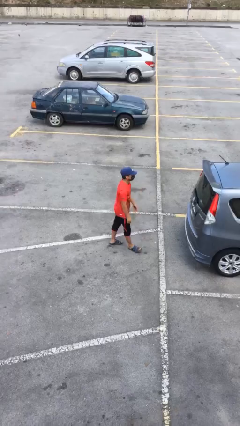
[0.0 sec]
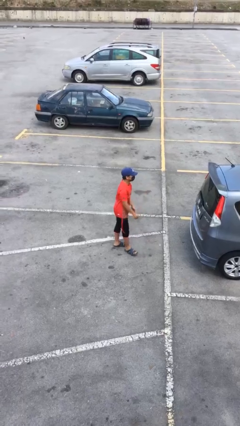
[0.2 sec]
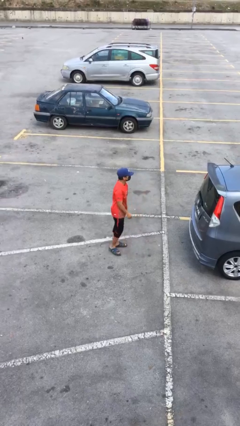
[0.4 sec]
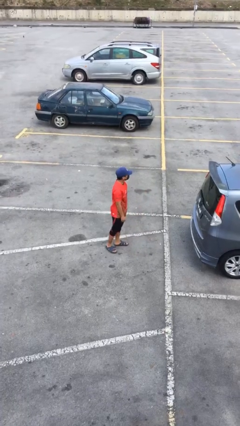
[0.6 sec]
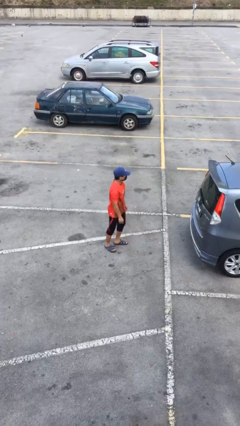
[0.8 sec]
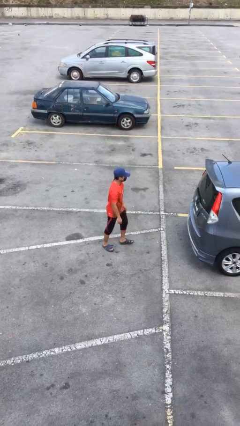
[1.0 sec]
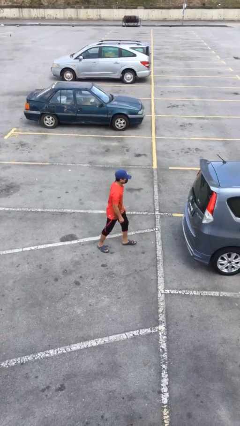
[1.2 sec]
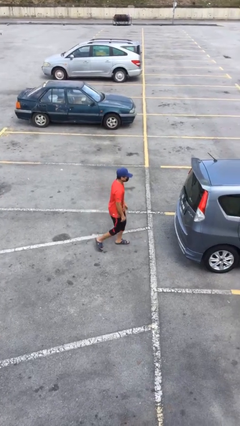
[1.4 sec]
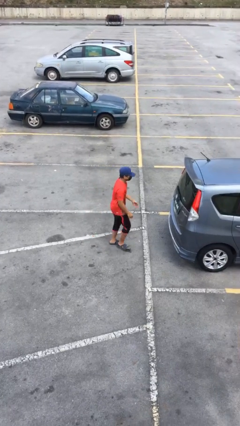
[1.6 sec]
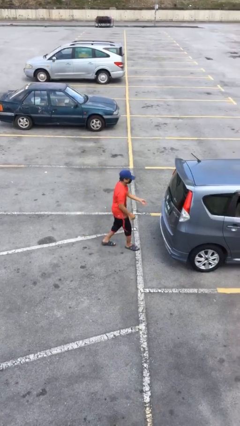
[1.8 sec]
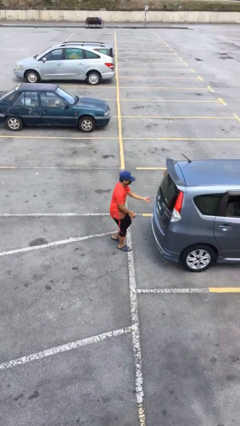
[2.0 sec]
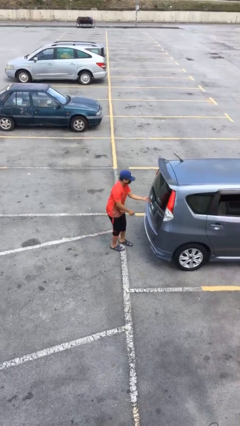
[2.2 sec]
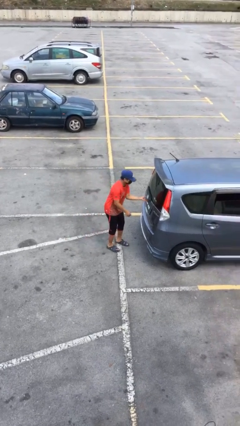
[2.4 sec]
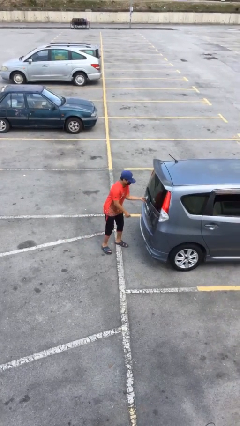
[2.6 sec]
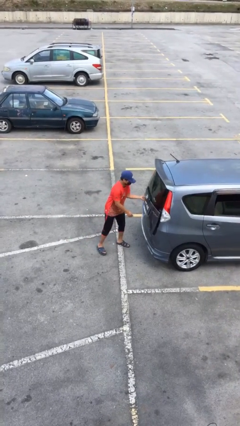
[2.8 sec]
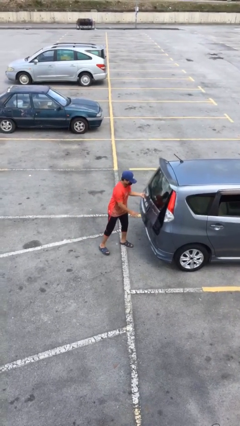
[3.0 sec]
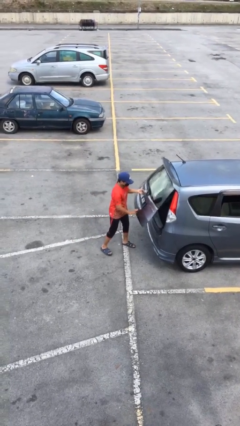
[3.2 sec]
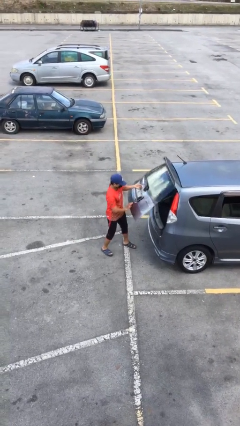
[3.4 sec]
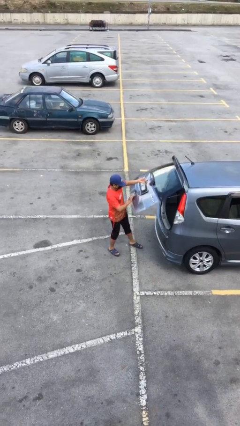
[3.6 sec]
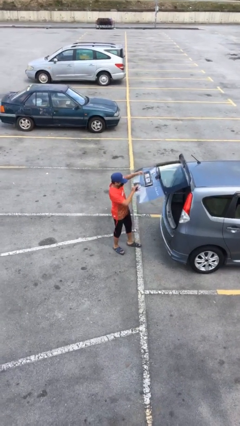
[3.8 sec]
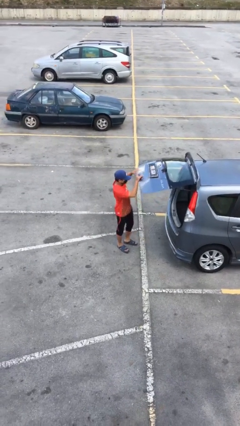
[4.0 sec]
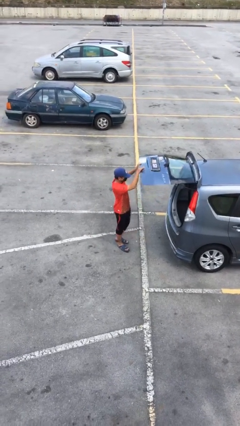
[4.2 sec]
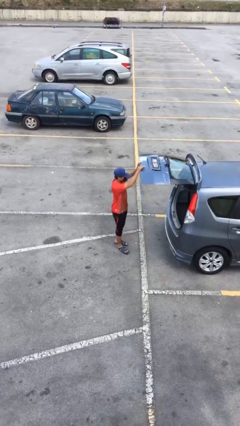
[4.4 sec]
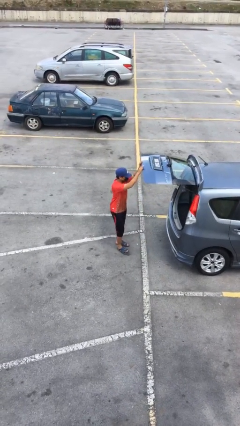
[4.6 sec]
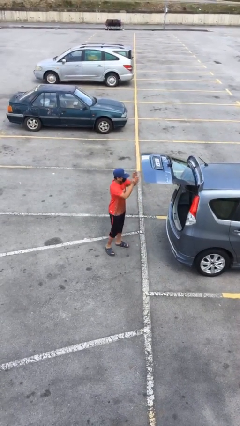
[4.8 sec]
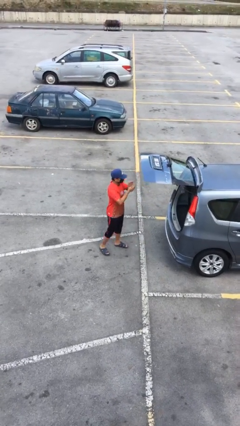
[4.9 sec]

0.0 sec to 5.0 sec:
person opens car trunk

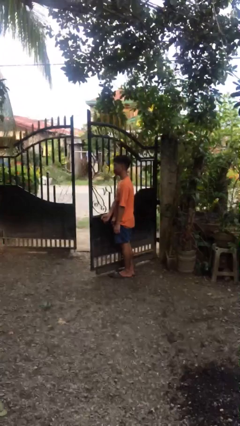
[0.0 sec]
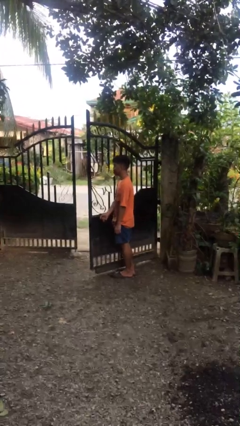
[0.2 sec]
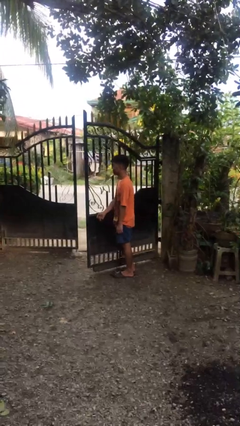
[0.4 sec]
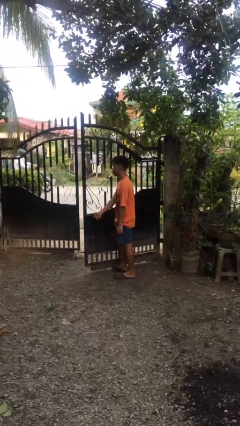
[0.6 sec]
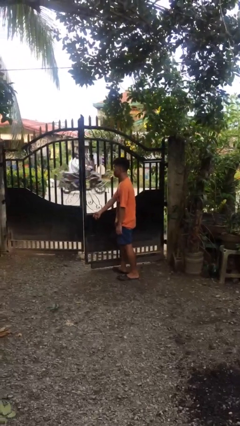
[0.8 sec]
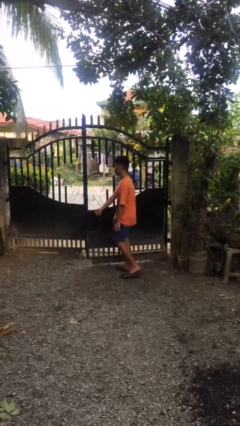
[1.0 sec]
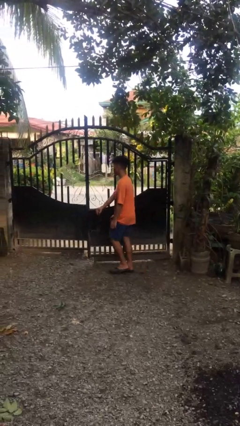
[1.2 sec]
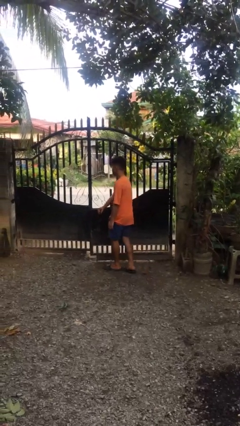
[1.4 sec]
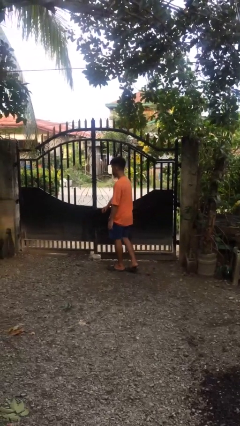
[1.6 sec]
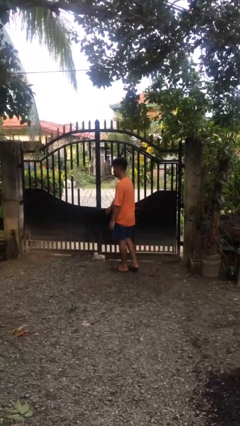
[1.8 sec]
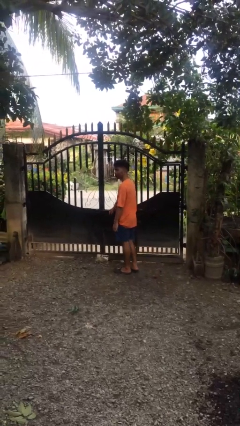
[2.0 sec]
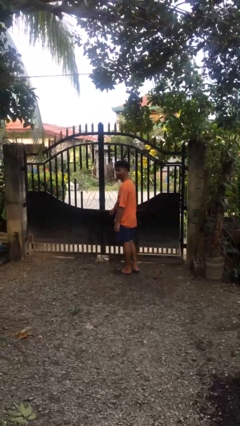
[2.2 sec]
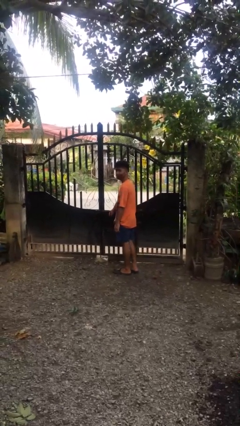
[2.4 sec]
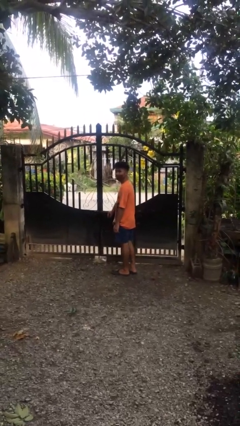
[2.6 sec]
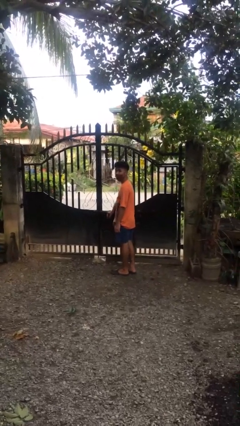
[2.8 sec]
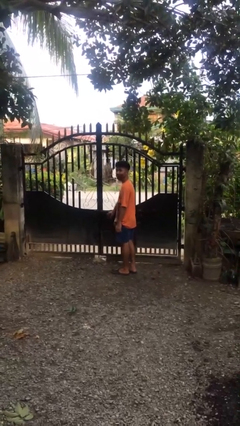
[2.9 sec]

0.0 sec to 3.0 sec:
person closes gate

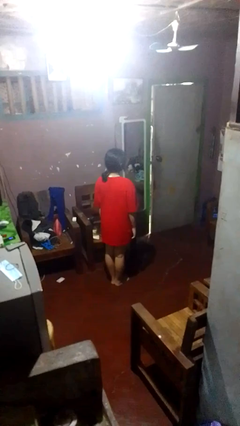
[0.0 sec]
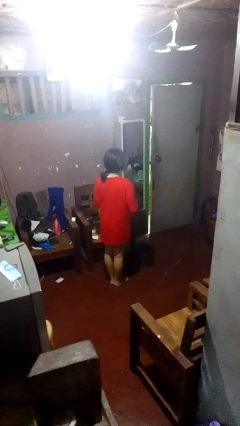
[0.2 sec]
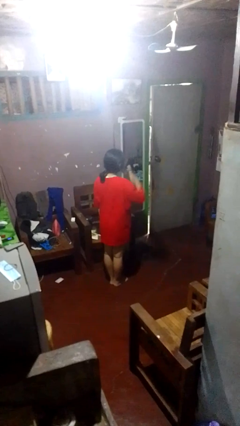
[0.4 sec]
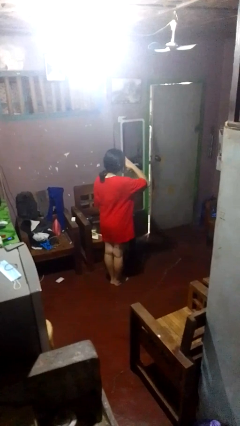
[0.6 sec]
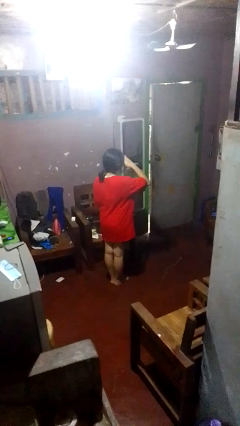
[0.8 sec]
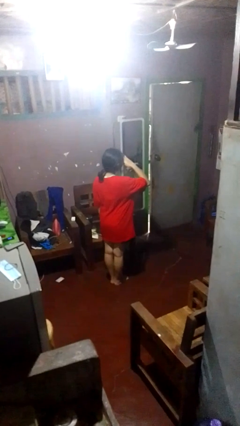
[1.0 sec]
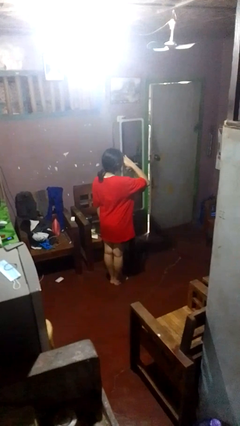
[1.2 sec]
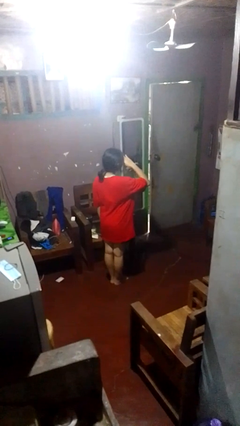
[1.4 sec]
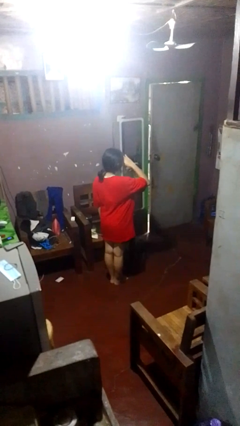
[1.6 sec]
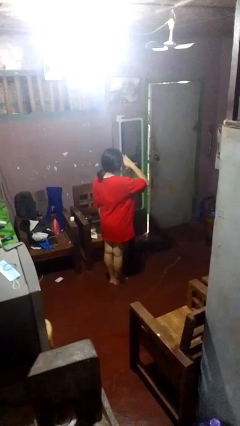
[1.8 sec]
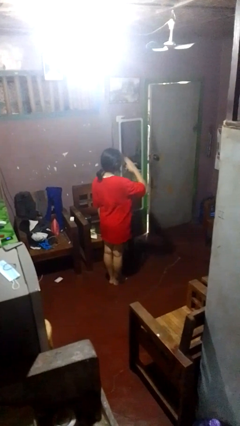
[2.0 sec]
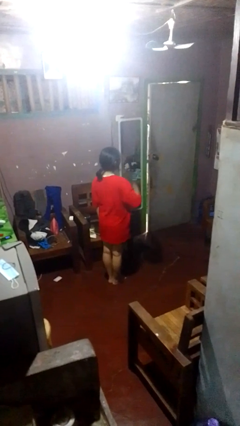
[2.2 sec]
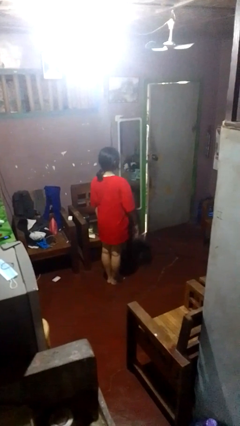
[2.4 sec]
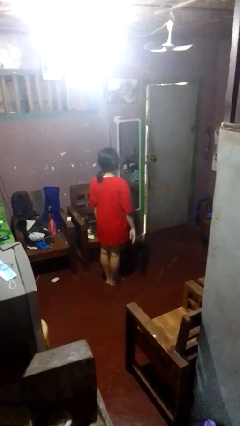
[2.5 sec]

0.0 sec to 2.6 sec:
person salutes

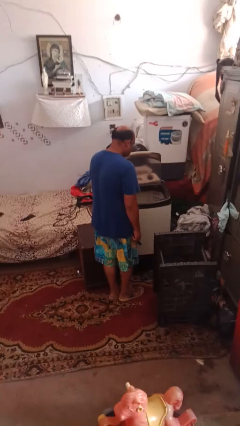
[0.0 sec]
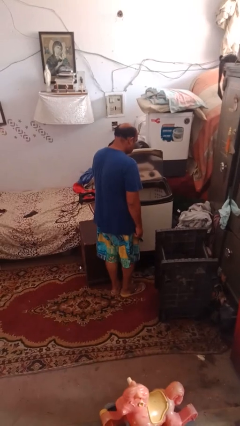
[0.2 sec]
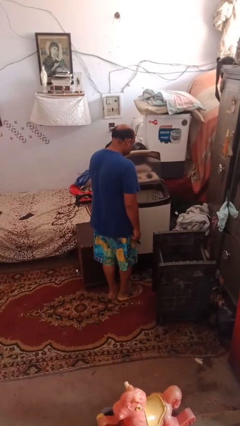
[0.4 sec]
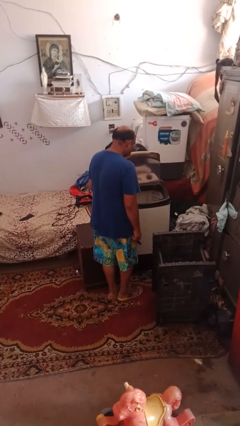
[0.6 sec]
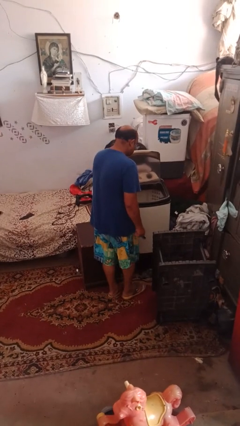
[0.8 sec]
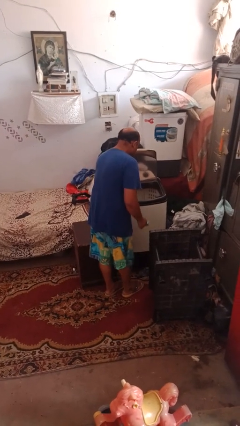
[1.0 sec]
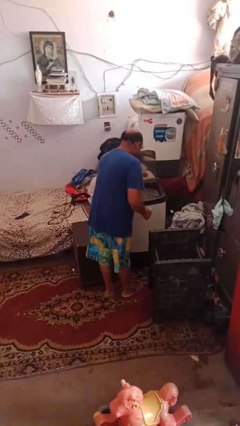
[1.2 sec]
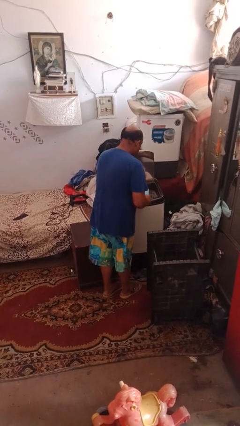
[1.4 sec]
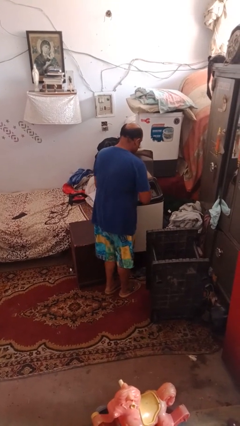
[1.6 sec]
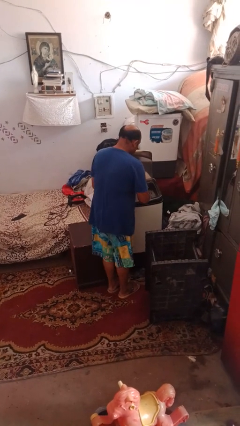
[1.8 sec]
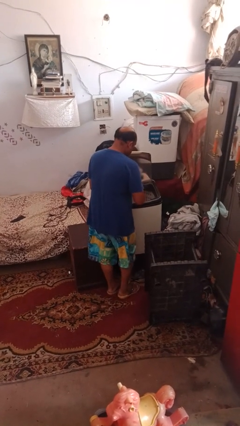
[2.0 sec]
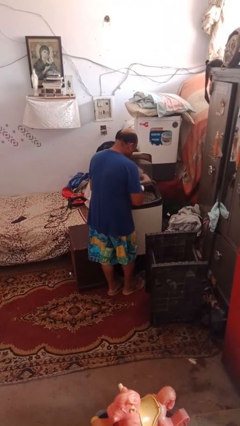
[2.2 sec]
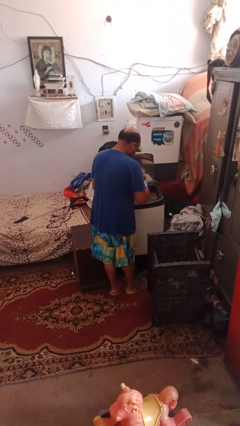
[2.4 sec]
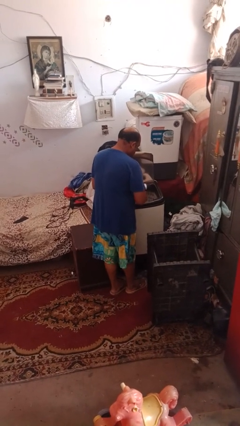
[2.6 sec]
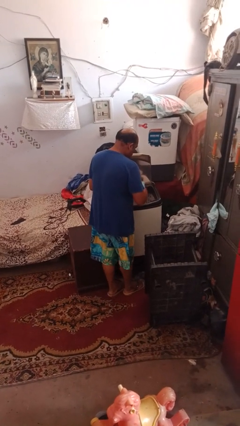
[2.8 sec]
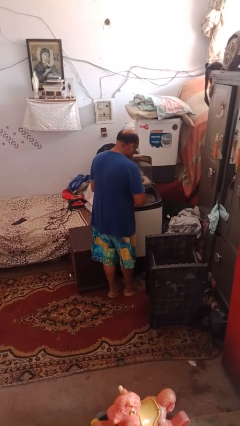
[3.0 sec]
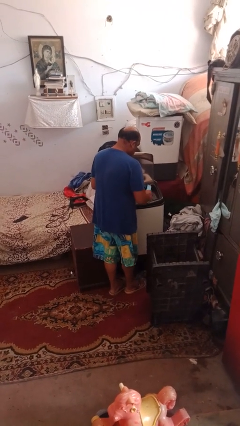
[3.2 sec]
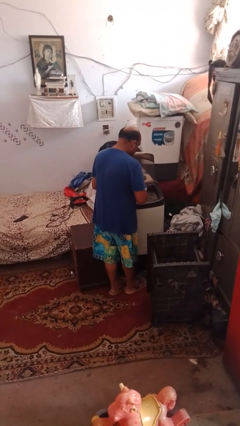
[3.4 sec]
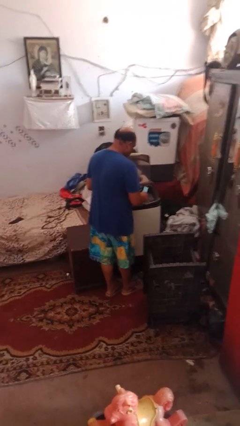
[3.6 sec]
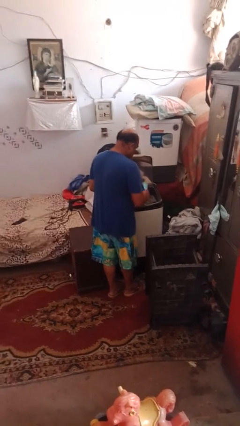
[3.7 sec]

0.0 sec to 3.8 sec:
person cleans dryer lint trap

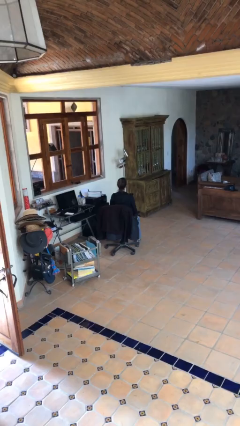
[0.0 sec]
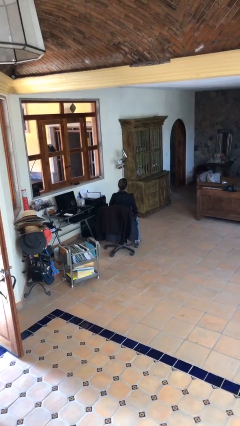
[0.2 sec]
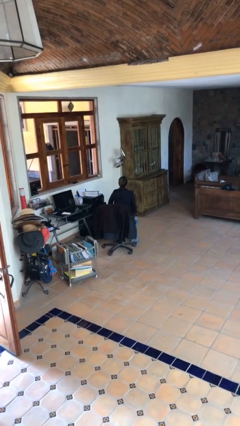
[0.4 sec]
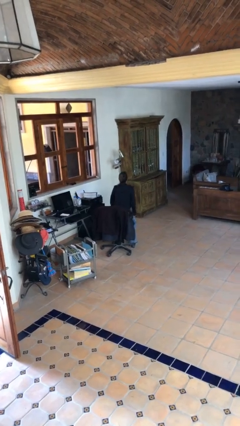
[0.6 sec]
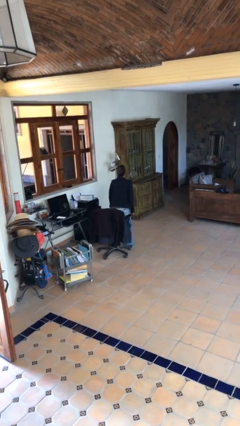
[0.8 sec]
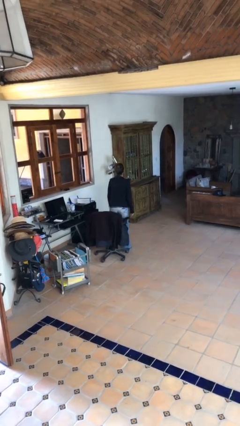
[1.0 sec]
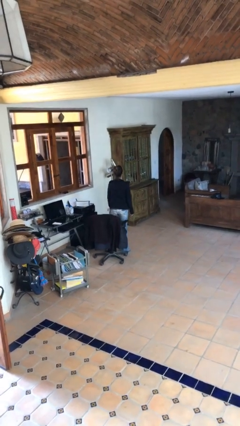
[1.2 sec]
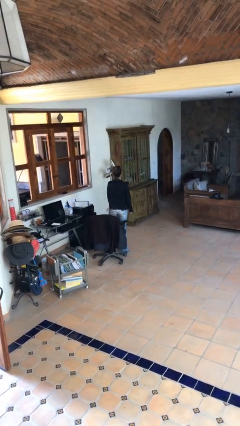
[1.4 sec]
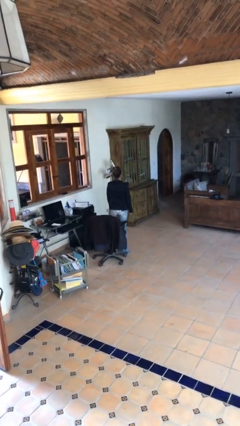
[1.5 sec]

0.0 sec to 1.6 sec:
person stands up

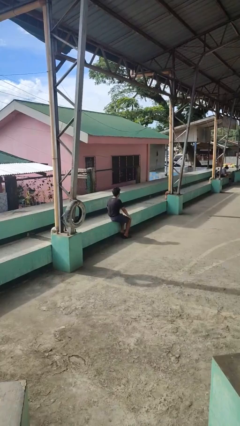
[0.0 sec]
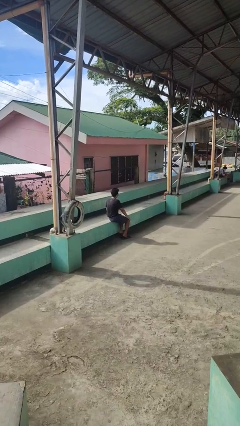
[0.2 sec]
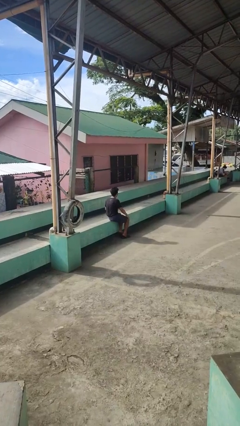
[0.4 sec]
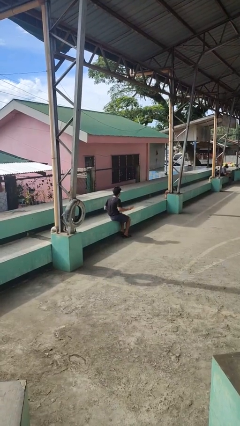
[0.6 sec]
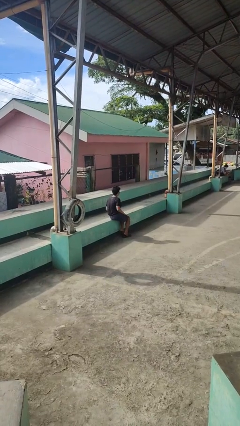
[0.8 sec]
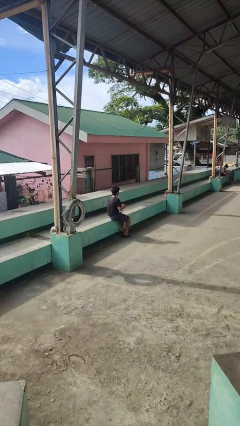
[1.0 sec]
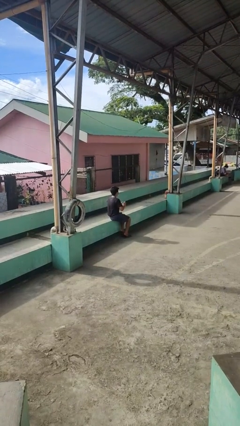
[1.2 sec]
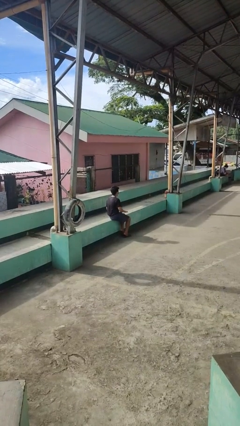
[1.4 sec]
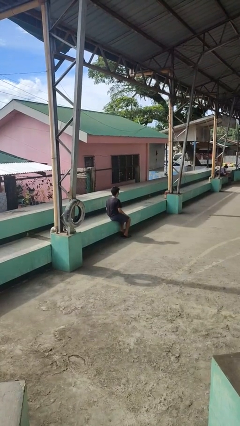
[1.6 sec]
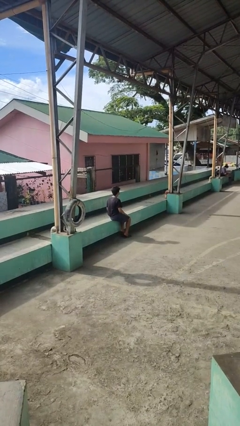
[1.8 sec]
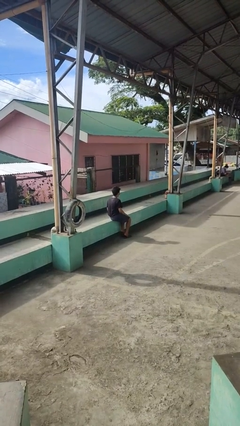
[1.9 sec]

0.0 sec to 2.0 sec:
person slaps hands on thighs
